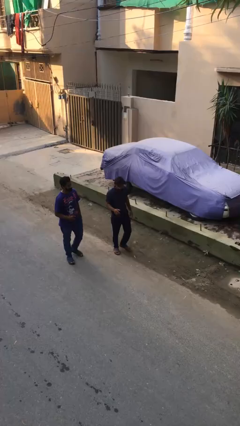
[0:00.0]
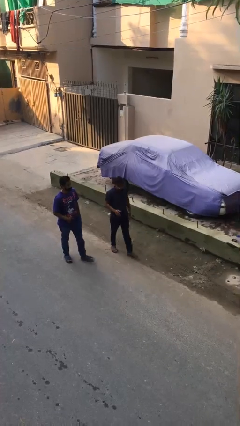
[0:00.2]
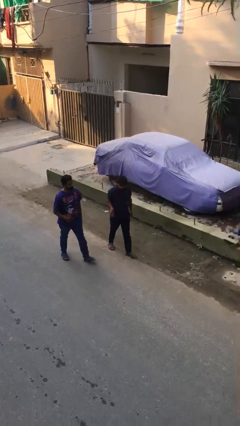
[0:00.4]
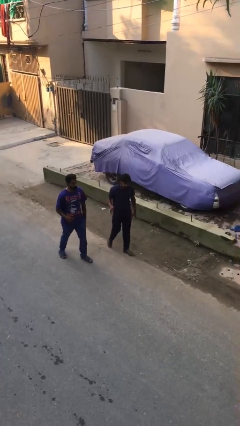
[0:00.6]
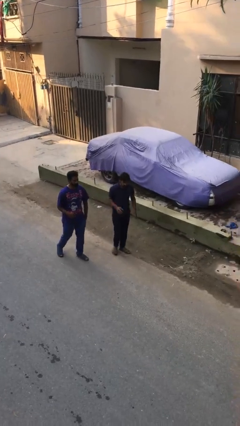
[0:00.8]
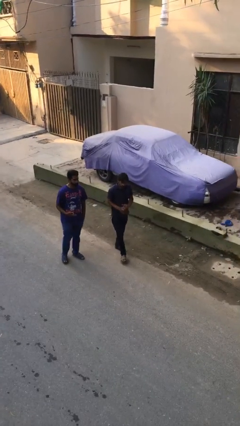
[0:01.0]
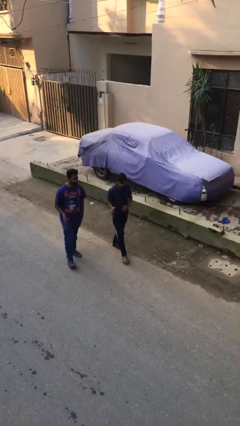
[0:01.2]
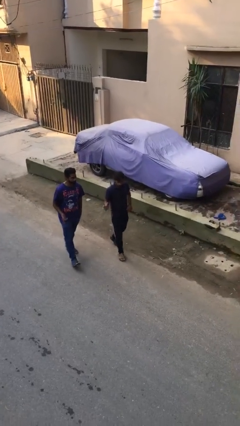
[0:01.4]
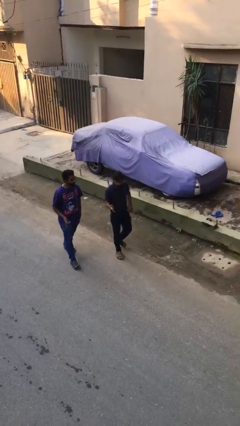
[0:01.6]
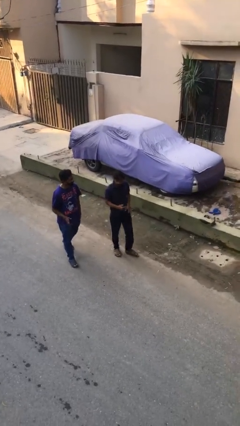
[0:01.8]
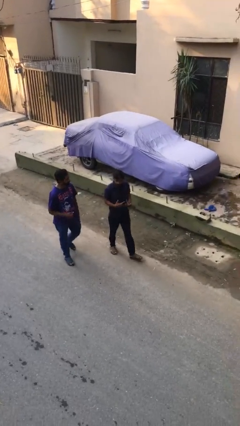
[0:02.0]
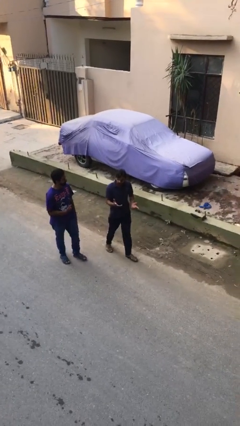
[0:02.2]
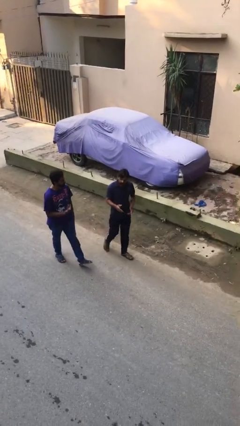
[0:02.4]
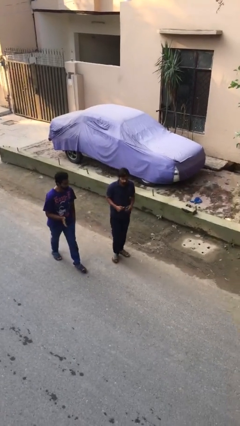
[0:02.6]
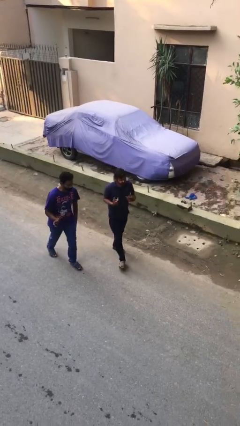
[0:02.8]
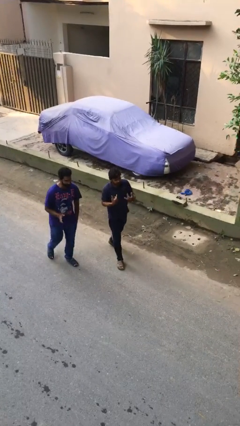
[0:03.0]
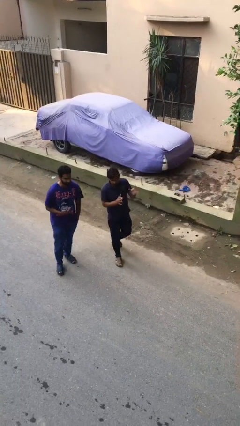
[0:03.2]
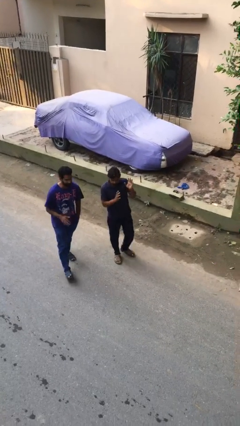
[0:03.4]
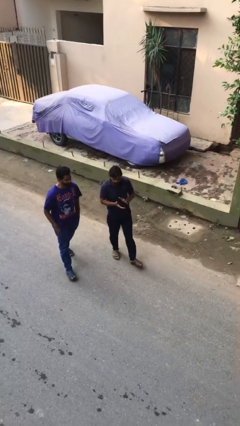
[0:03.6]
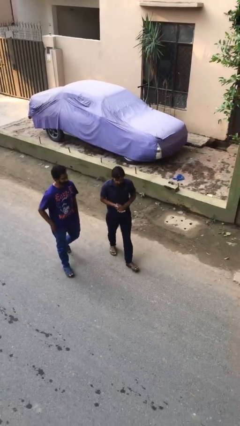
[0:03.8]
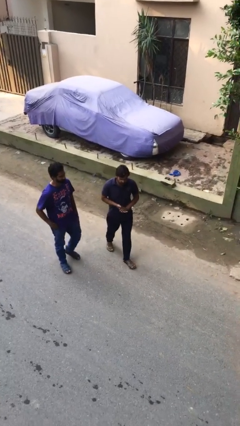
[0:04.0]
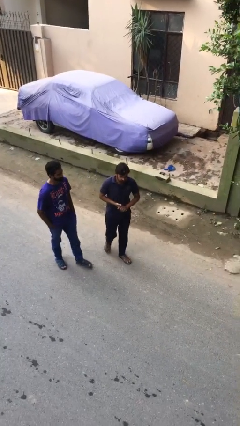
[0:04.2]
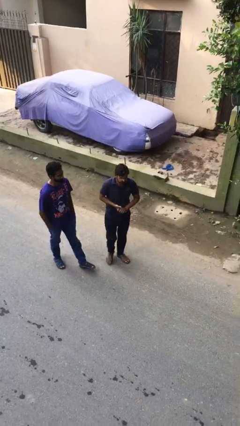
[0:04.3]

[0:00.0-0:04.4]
person talks to person

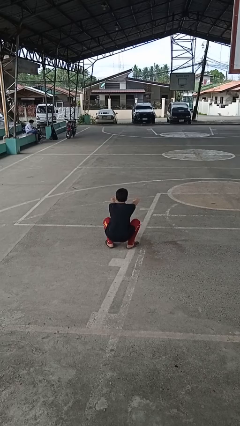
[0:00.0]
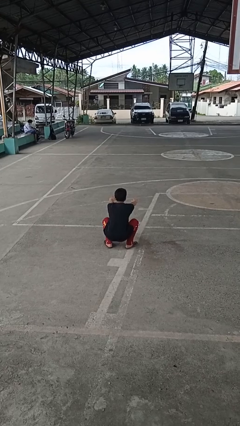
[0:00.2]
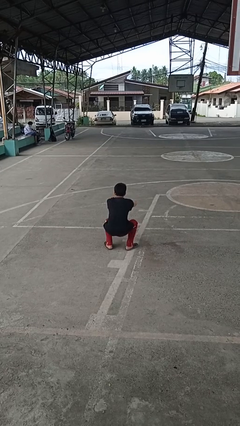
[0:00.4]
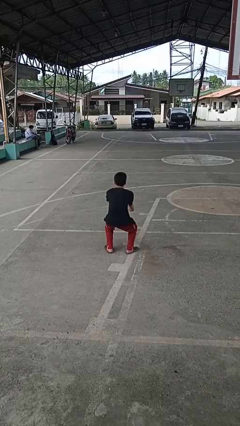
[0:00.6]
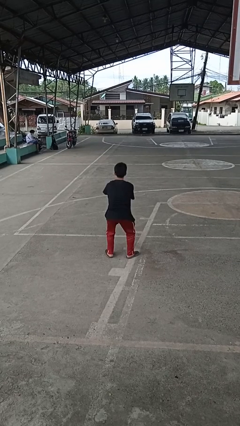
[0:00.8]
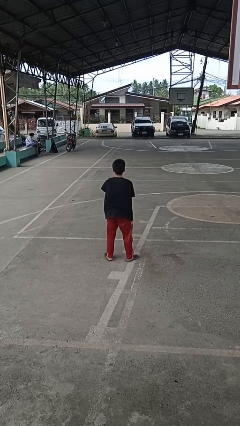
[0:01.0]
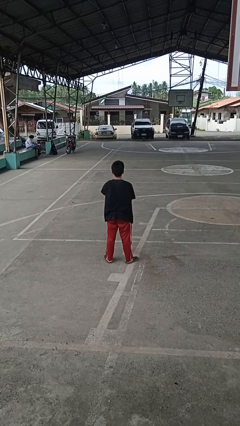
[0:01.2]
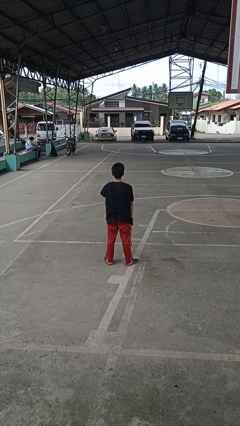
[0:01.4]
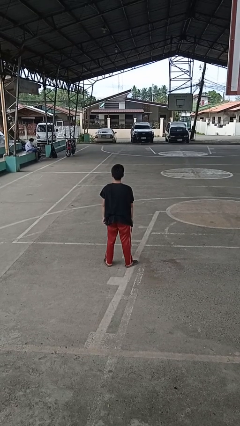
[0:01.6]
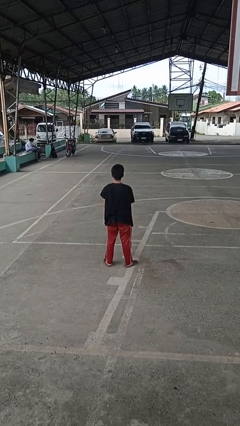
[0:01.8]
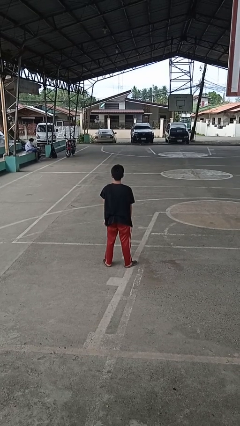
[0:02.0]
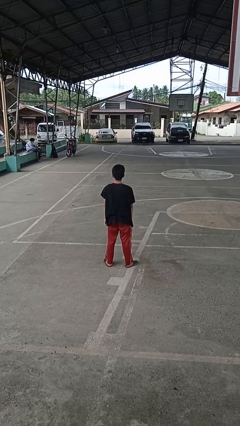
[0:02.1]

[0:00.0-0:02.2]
person stands up

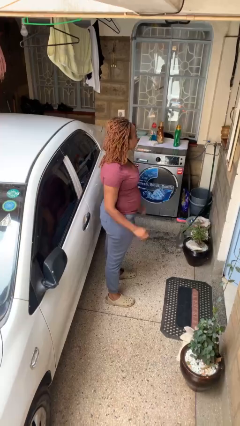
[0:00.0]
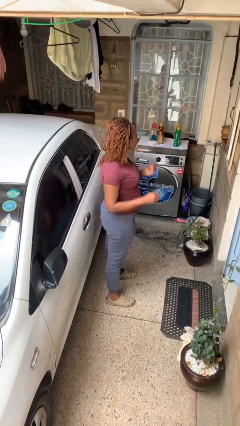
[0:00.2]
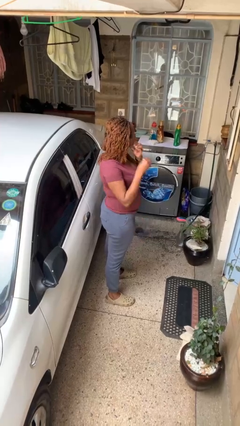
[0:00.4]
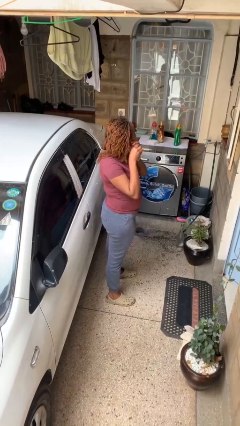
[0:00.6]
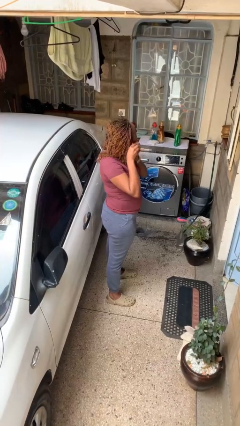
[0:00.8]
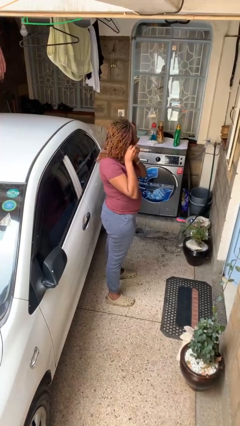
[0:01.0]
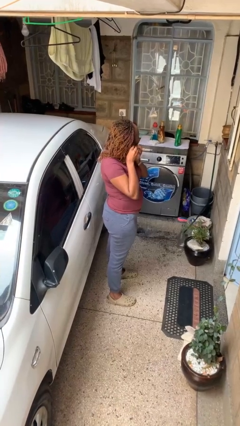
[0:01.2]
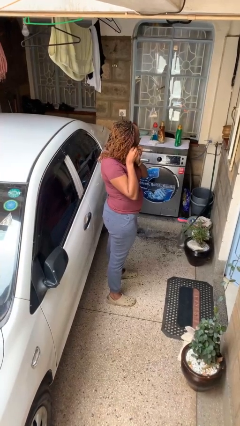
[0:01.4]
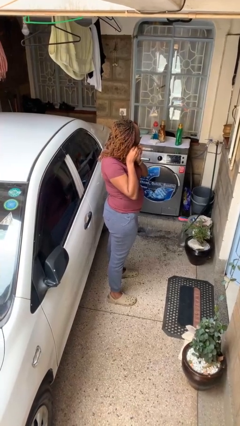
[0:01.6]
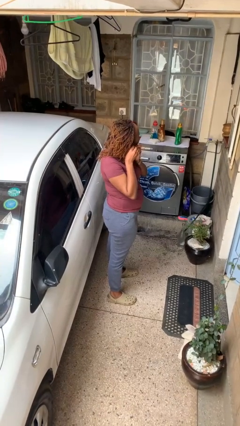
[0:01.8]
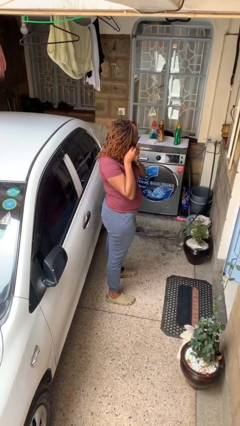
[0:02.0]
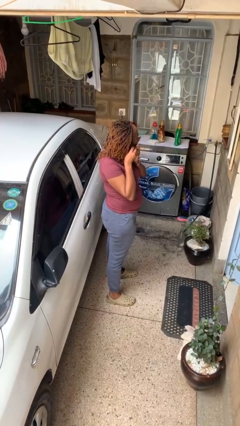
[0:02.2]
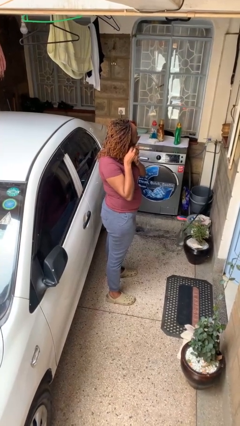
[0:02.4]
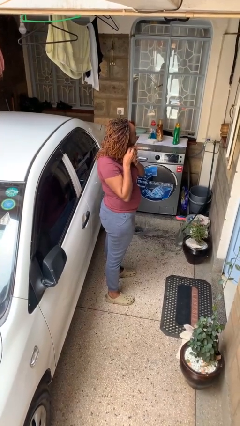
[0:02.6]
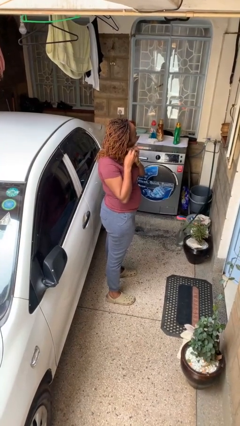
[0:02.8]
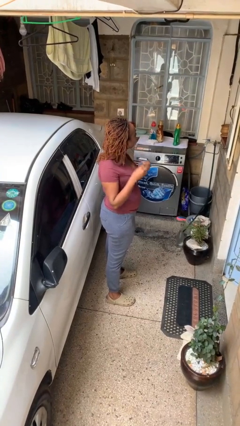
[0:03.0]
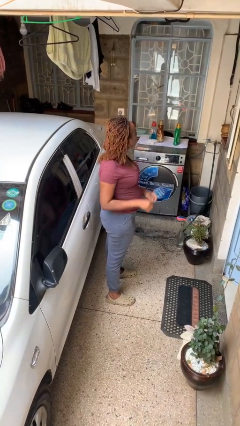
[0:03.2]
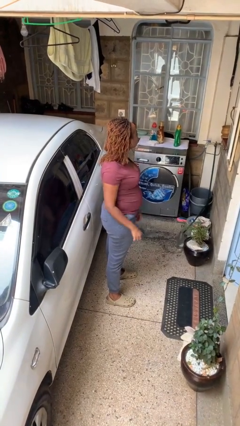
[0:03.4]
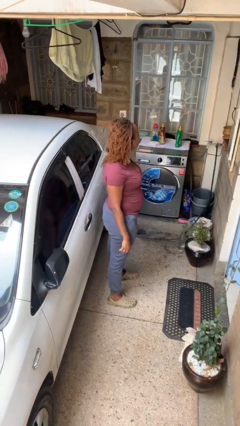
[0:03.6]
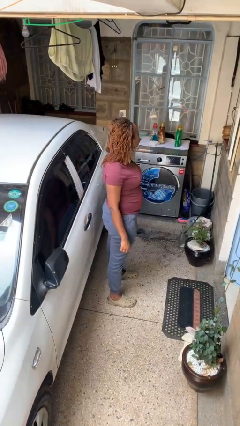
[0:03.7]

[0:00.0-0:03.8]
person puts on earrings

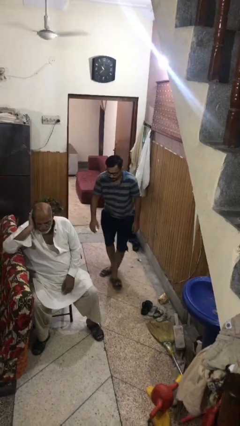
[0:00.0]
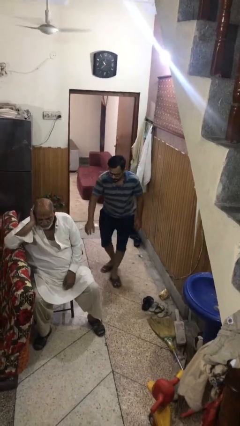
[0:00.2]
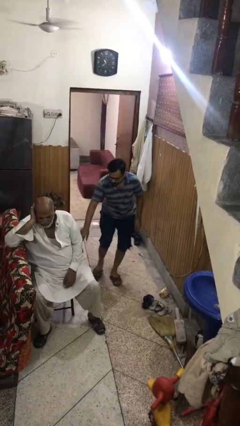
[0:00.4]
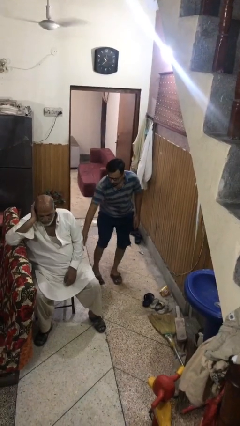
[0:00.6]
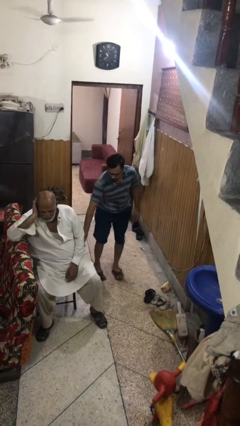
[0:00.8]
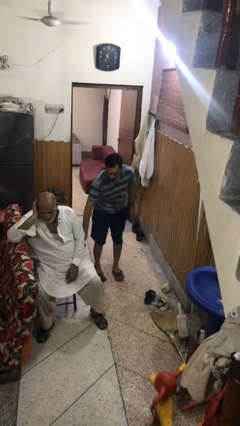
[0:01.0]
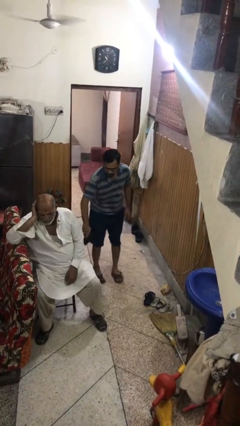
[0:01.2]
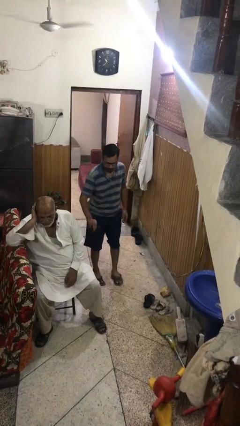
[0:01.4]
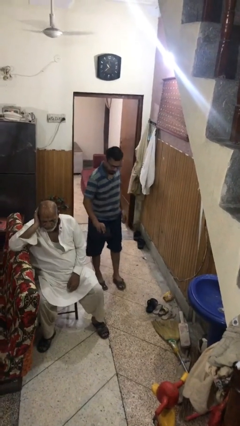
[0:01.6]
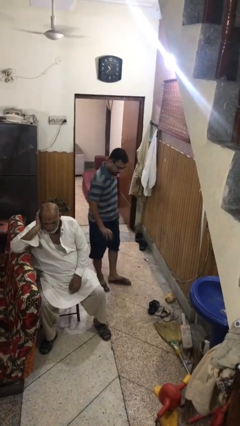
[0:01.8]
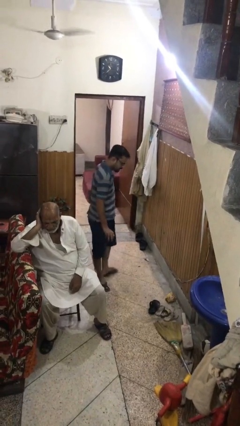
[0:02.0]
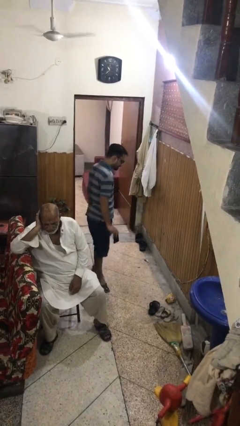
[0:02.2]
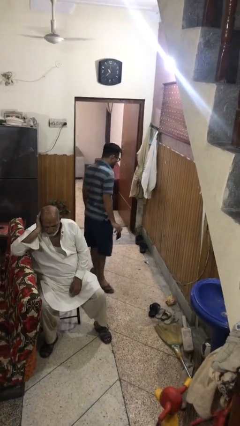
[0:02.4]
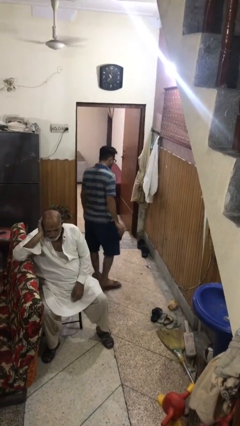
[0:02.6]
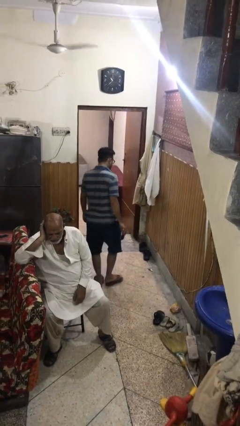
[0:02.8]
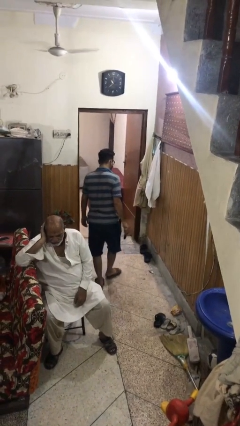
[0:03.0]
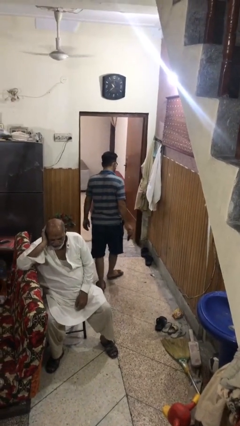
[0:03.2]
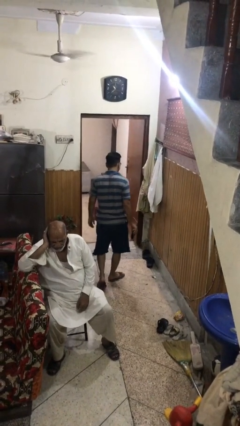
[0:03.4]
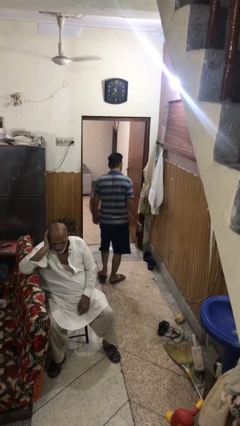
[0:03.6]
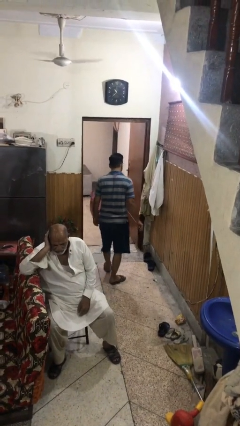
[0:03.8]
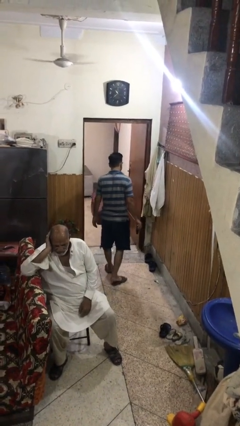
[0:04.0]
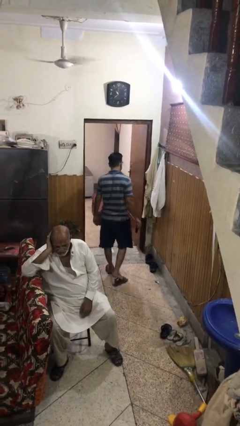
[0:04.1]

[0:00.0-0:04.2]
person steals object from person

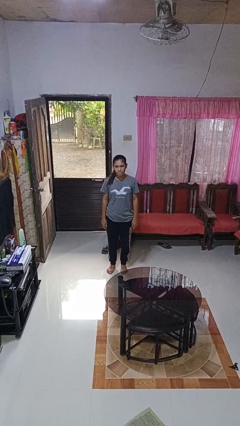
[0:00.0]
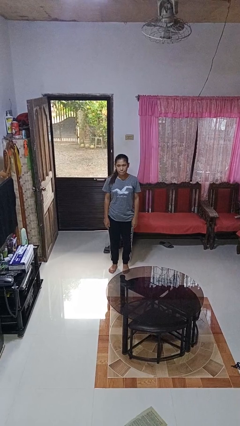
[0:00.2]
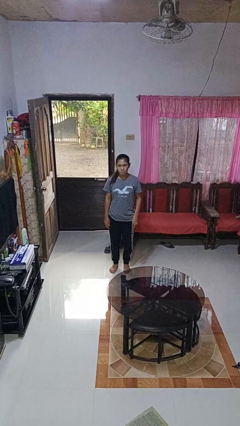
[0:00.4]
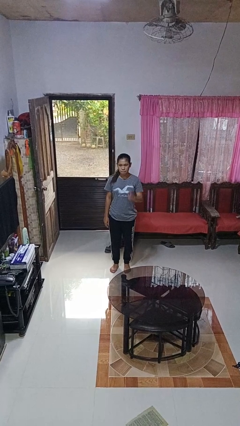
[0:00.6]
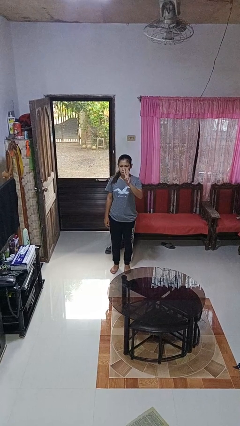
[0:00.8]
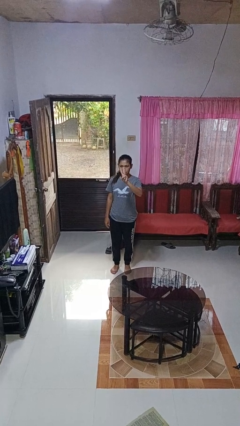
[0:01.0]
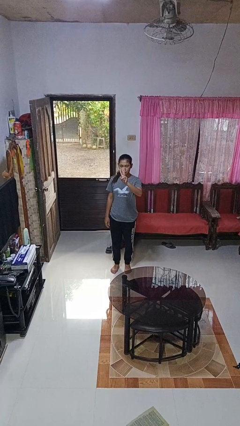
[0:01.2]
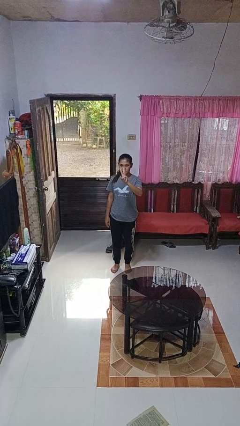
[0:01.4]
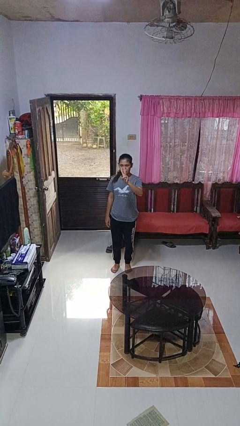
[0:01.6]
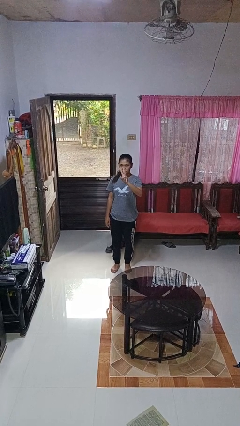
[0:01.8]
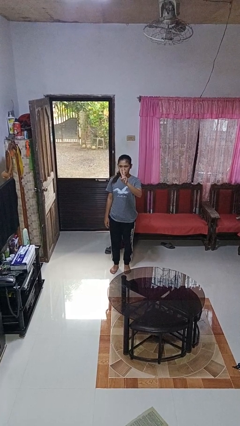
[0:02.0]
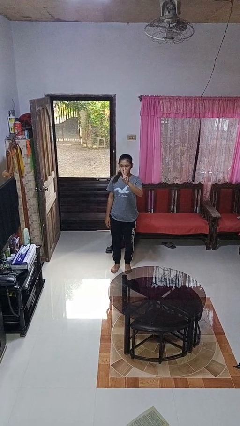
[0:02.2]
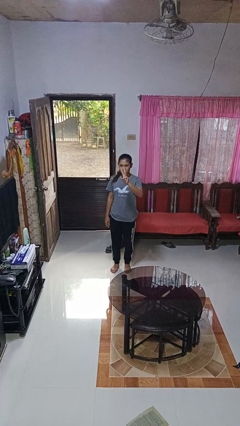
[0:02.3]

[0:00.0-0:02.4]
person gestures number three

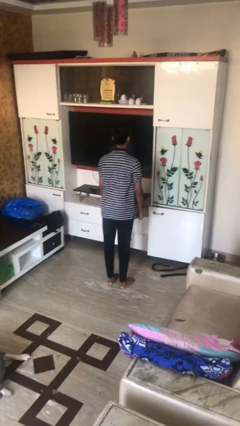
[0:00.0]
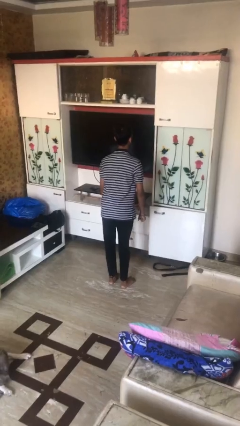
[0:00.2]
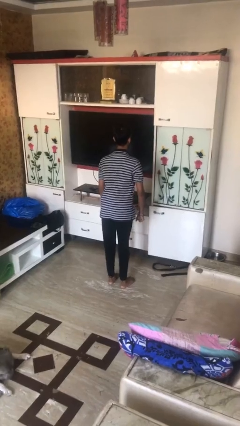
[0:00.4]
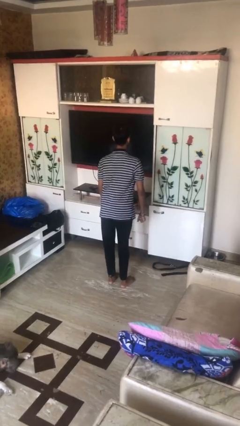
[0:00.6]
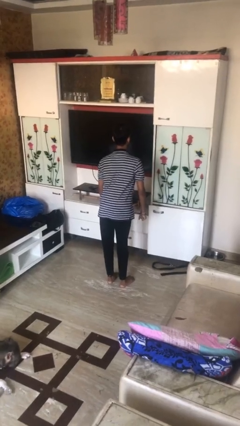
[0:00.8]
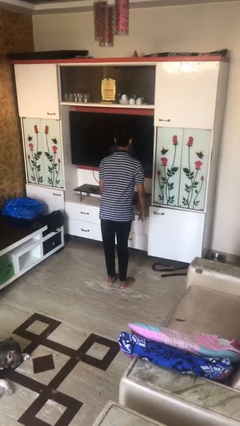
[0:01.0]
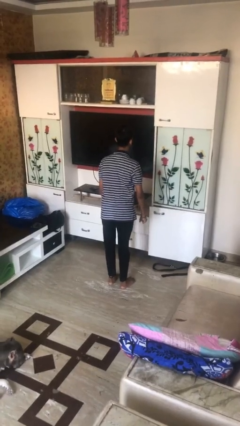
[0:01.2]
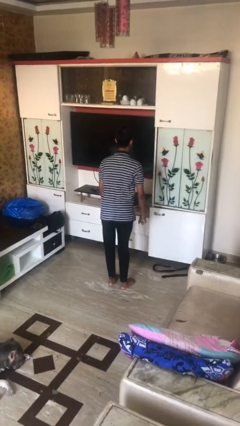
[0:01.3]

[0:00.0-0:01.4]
person wiggles hips
